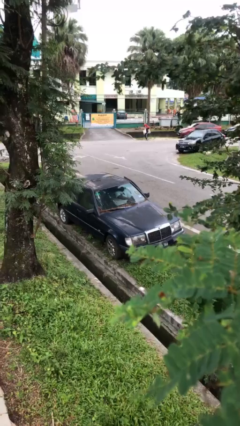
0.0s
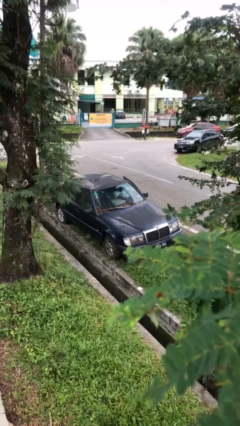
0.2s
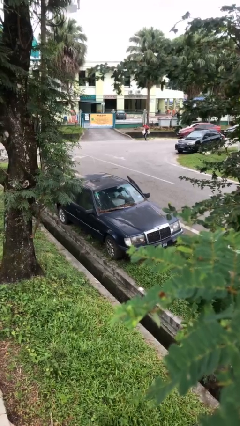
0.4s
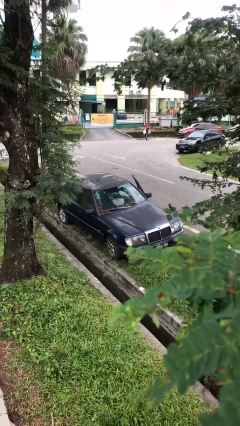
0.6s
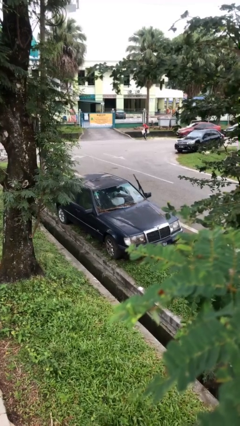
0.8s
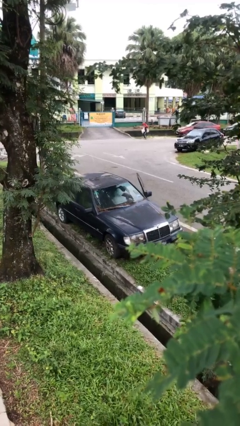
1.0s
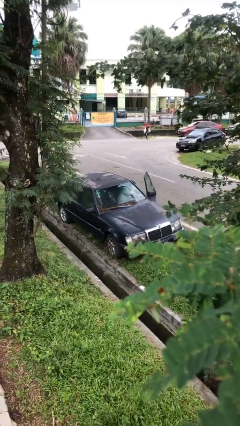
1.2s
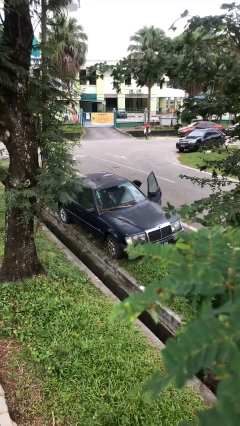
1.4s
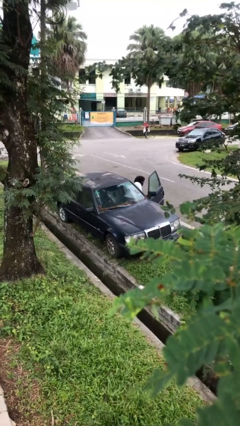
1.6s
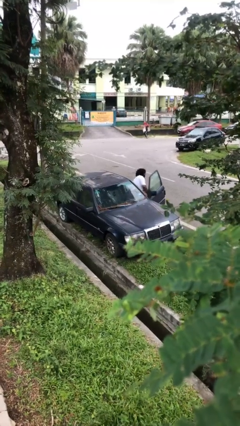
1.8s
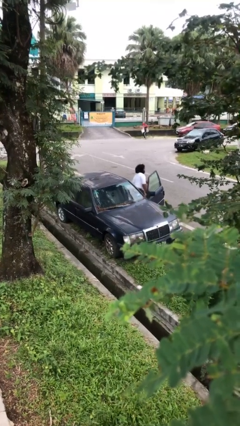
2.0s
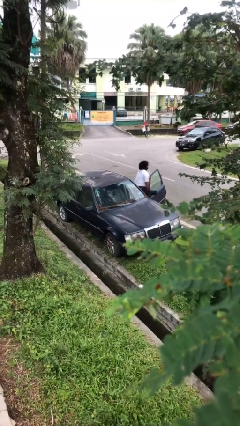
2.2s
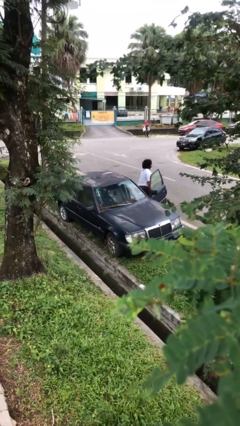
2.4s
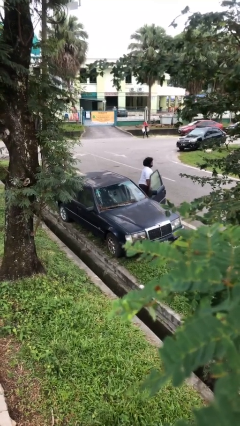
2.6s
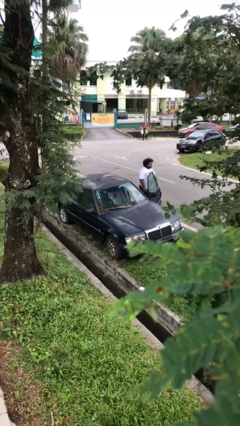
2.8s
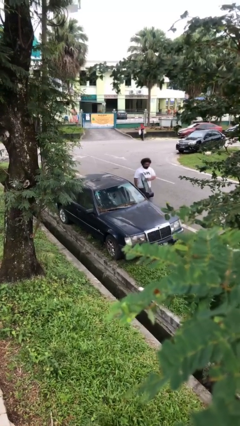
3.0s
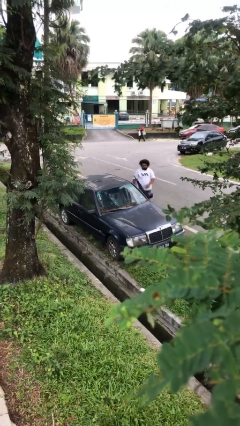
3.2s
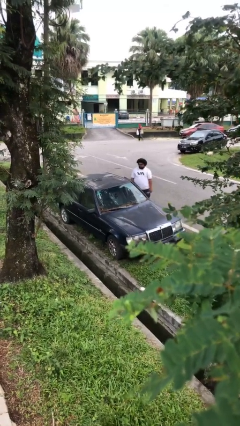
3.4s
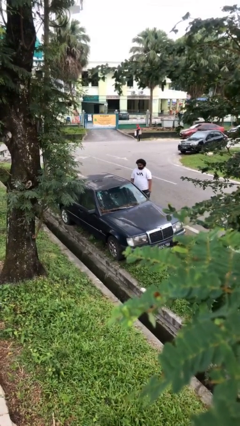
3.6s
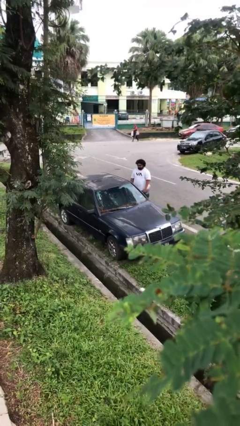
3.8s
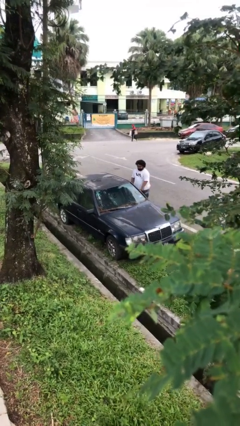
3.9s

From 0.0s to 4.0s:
car drops off person

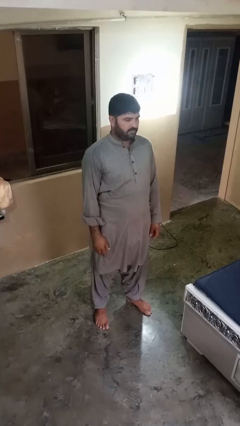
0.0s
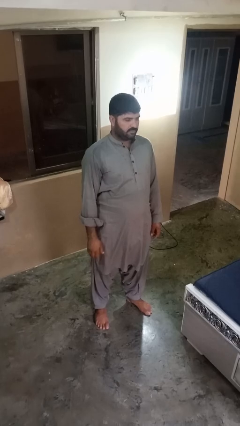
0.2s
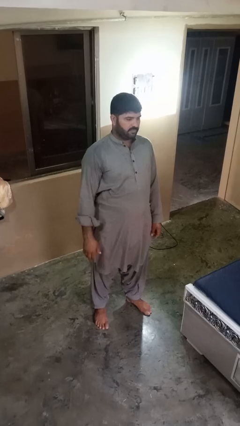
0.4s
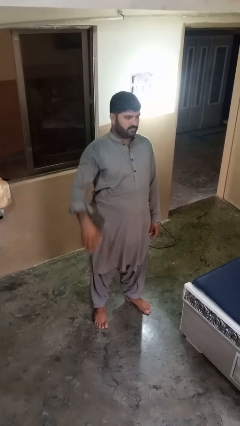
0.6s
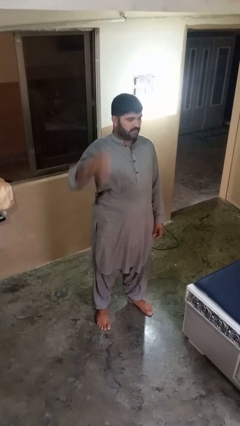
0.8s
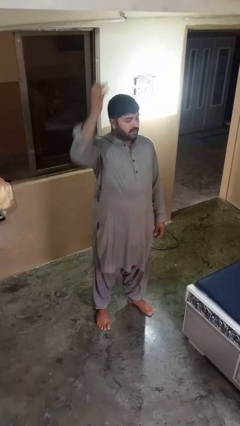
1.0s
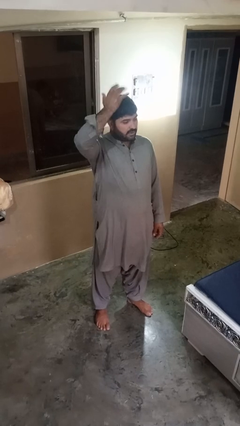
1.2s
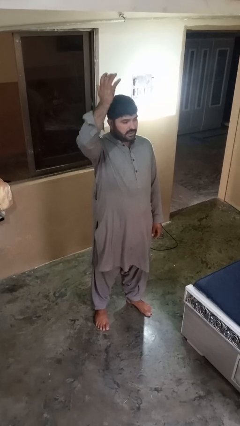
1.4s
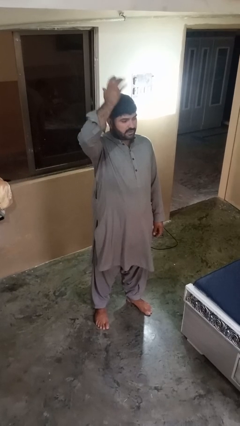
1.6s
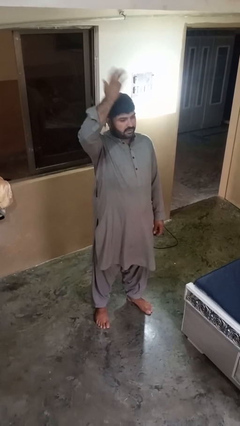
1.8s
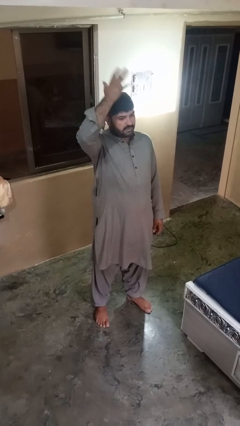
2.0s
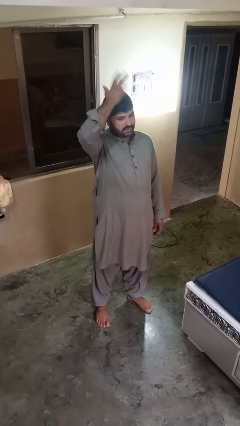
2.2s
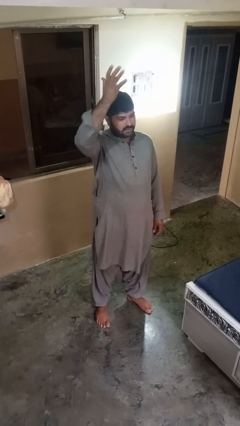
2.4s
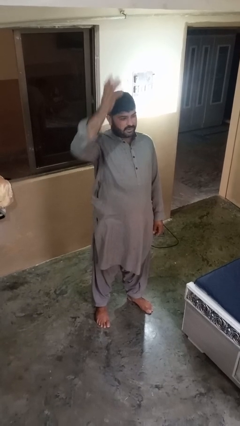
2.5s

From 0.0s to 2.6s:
person pats head

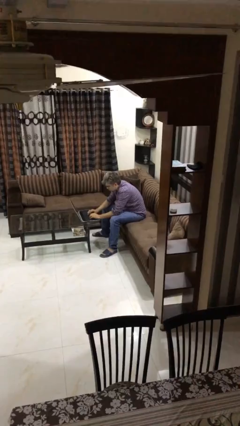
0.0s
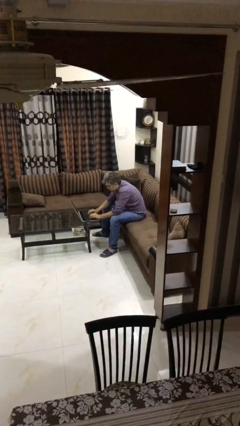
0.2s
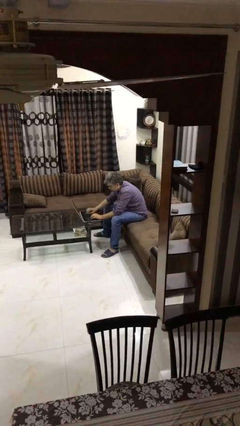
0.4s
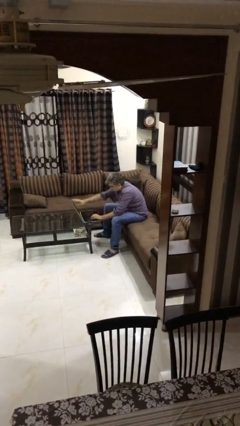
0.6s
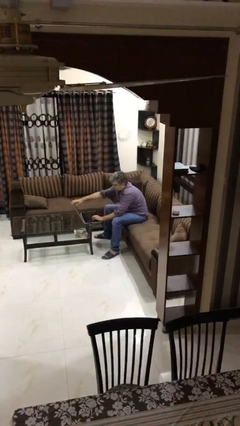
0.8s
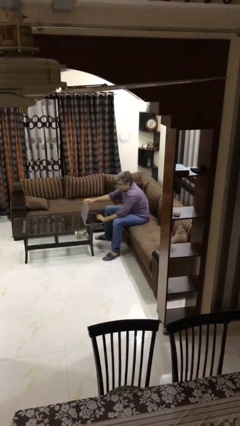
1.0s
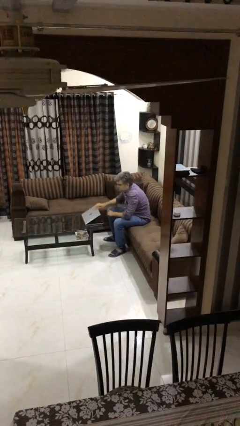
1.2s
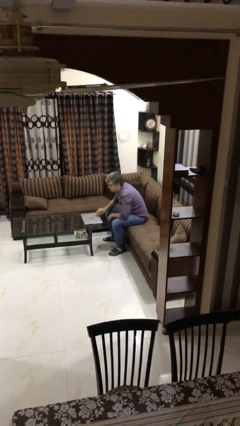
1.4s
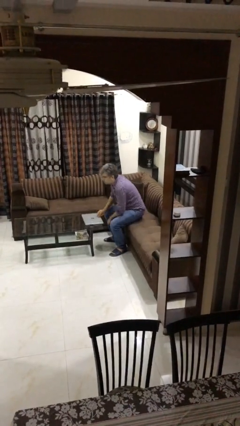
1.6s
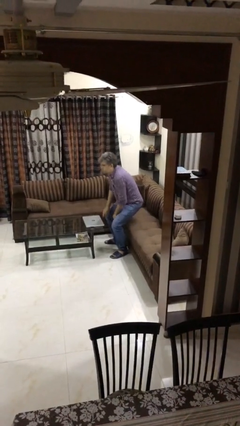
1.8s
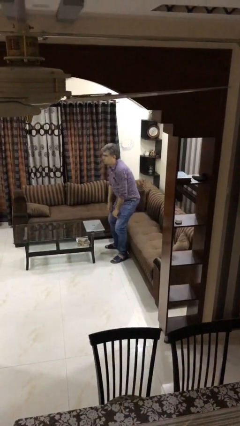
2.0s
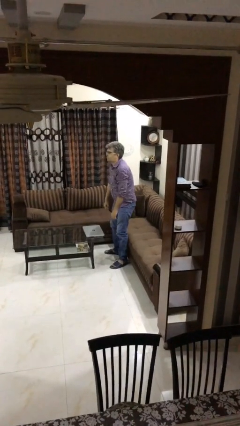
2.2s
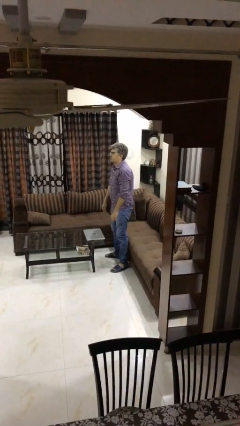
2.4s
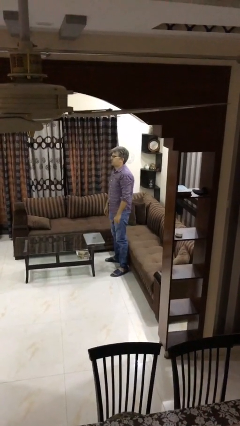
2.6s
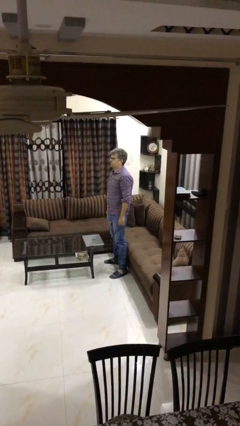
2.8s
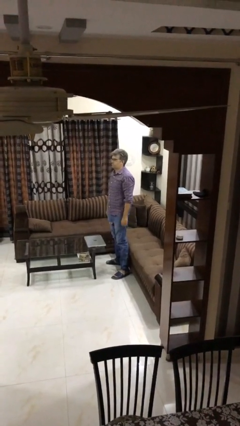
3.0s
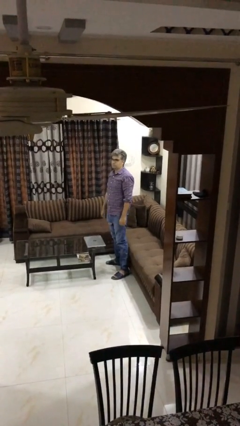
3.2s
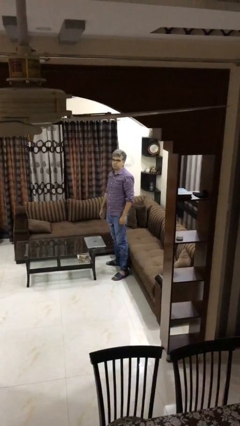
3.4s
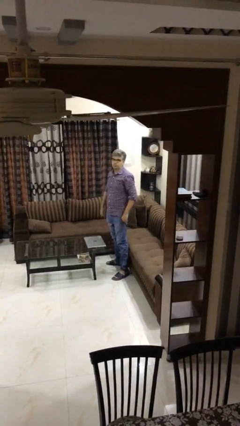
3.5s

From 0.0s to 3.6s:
person stands up

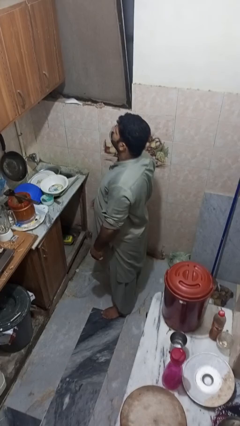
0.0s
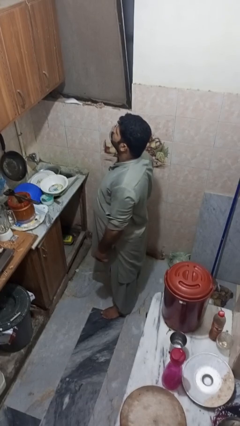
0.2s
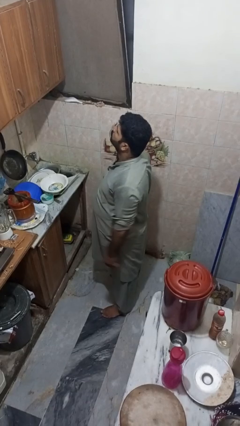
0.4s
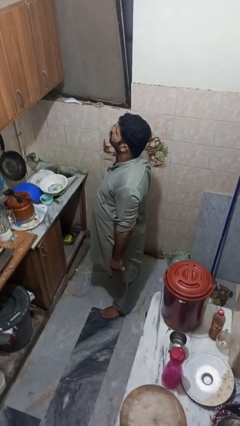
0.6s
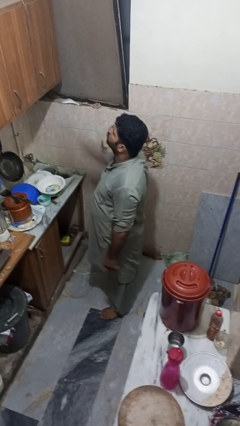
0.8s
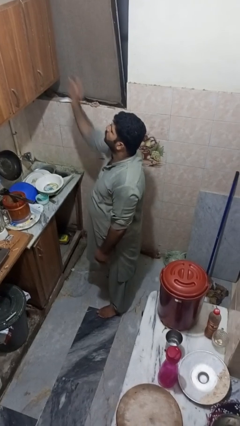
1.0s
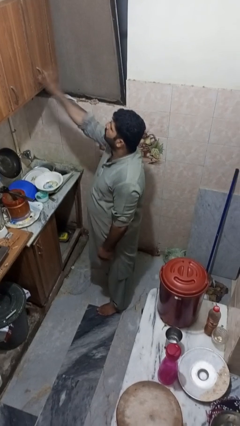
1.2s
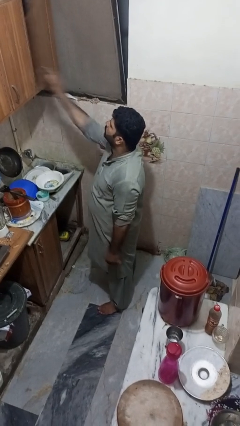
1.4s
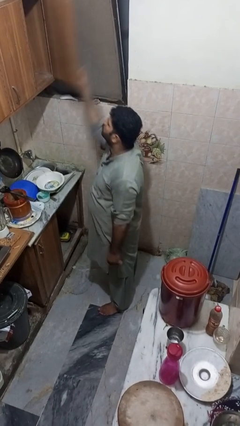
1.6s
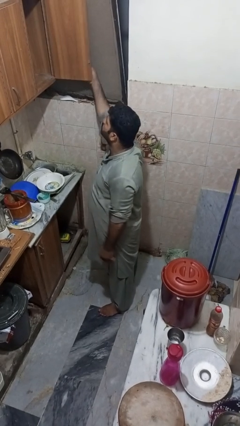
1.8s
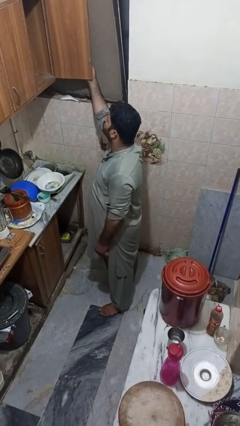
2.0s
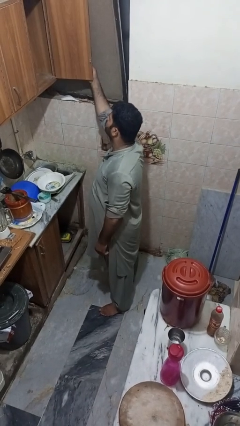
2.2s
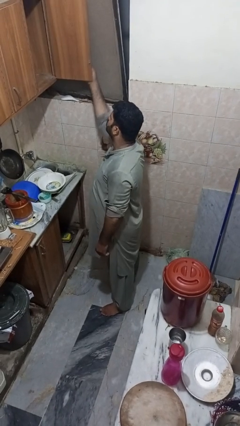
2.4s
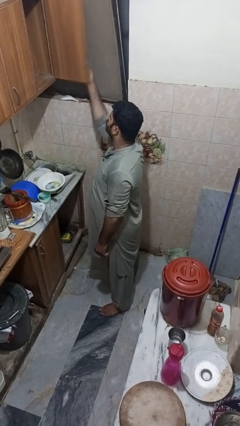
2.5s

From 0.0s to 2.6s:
person opens cabinet

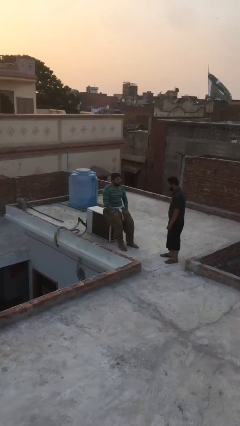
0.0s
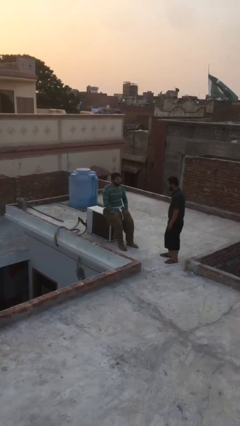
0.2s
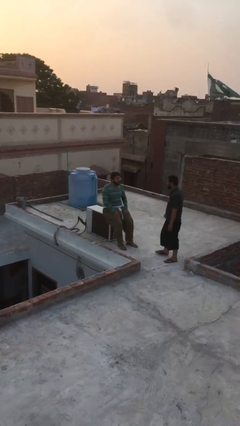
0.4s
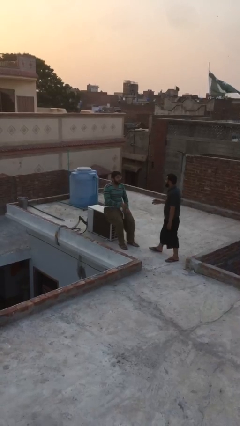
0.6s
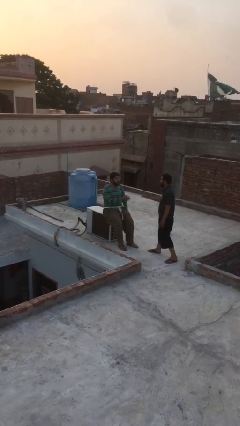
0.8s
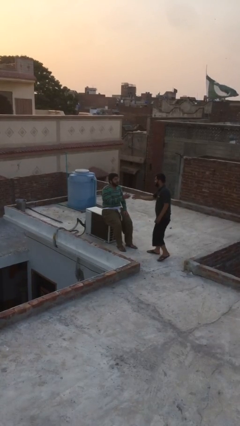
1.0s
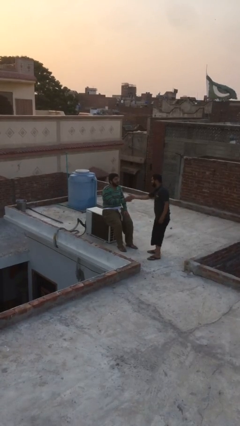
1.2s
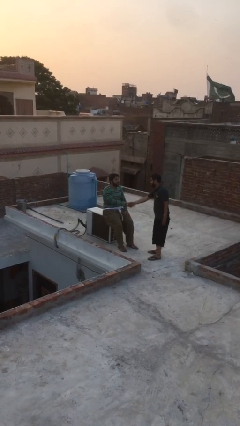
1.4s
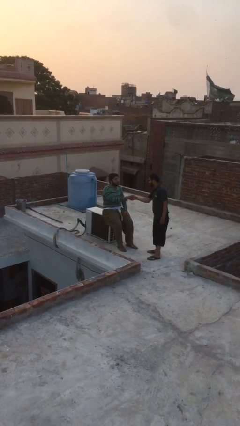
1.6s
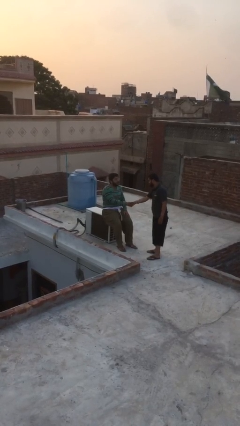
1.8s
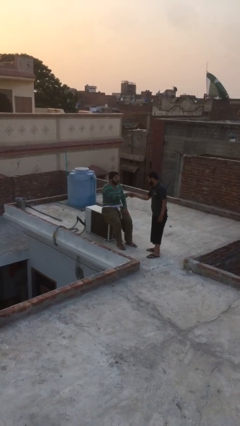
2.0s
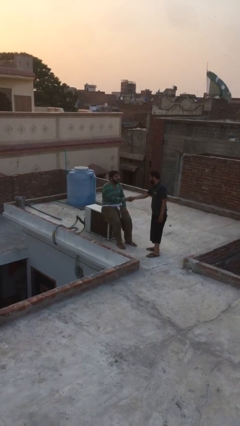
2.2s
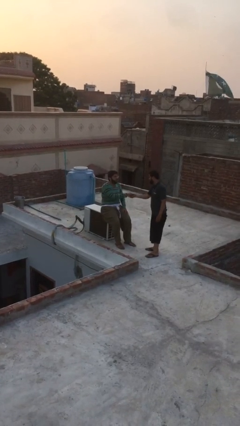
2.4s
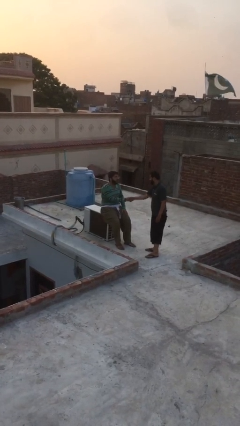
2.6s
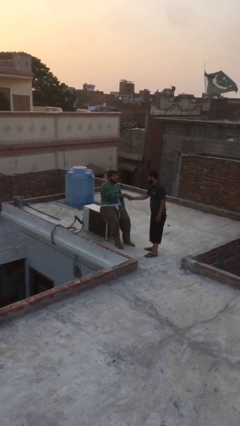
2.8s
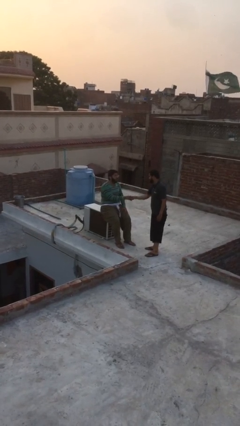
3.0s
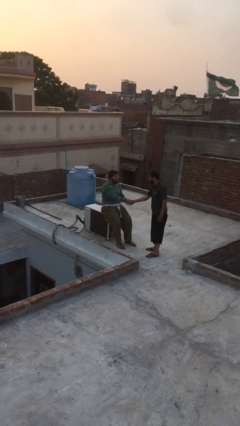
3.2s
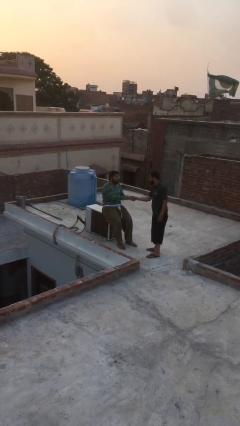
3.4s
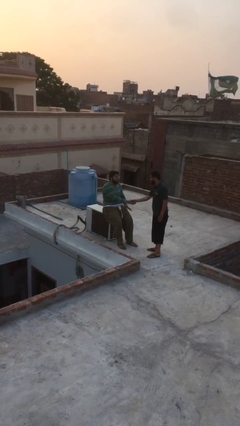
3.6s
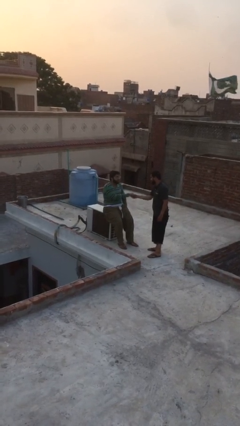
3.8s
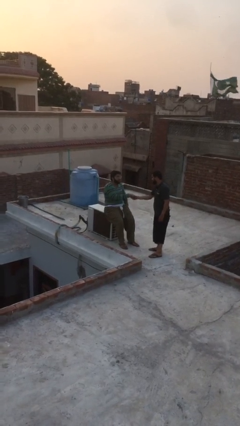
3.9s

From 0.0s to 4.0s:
person shakes hand
